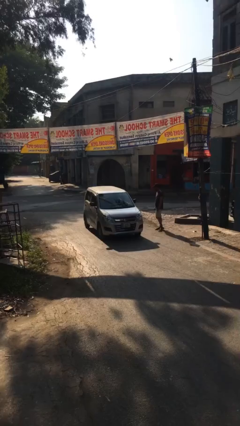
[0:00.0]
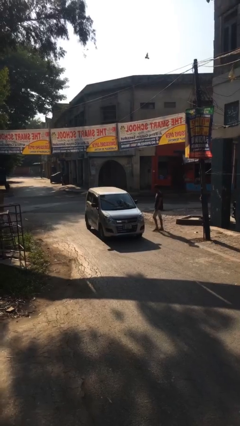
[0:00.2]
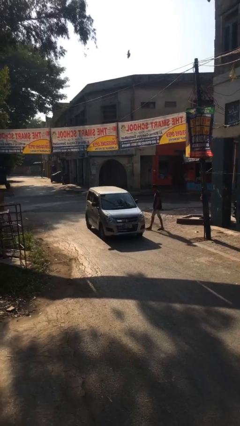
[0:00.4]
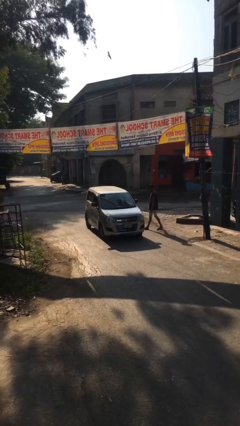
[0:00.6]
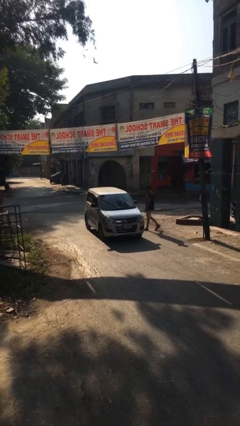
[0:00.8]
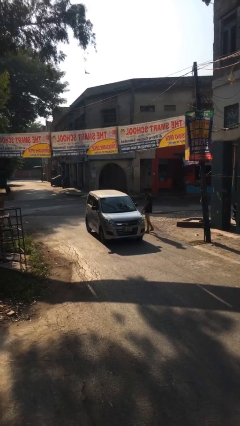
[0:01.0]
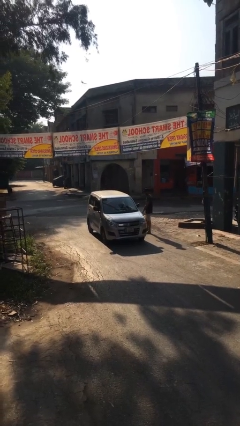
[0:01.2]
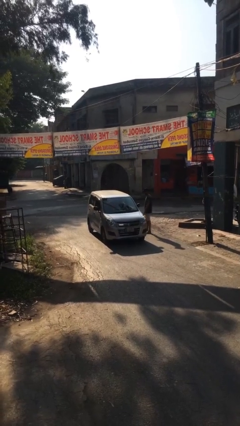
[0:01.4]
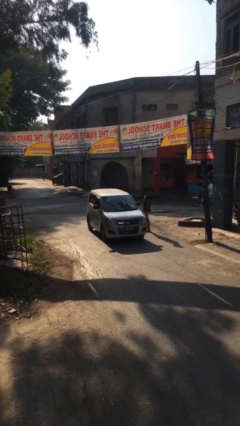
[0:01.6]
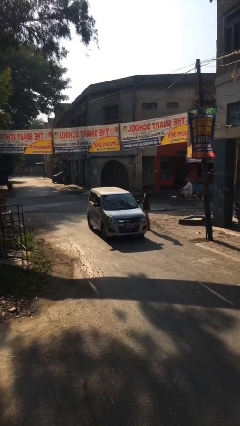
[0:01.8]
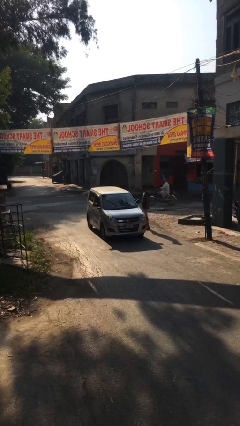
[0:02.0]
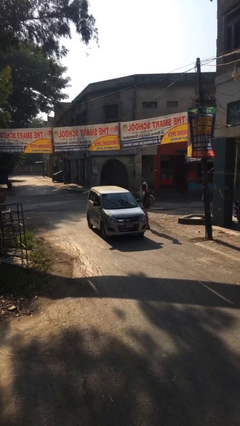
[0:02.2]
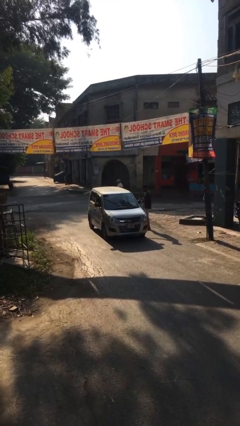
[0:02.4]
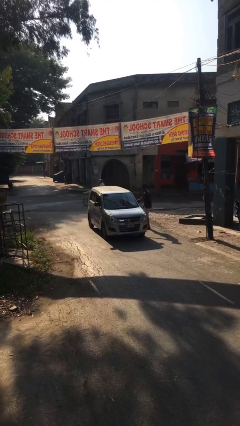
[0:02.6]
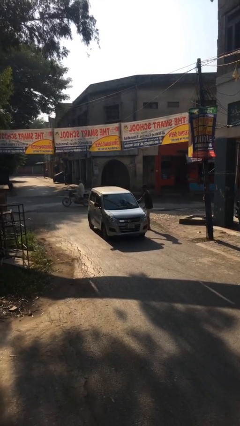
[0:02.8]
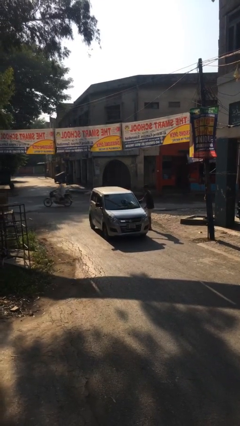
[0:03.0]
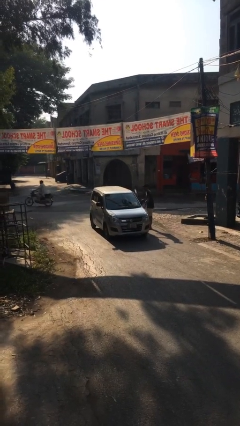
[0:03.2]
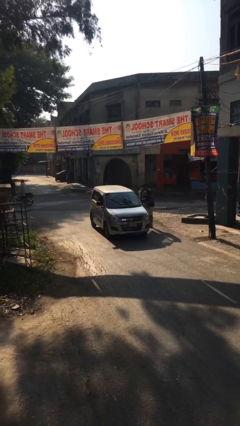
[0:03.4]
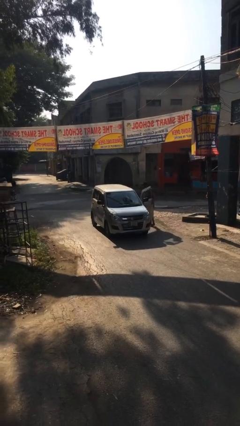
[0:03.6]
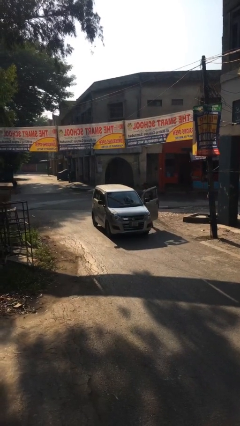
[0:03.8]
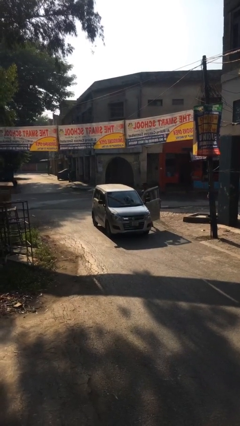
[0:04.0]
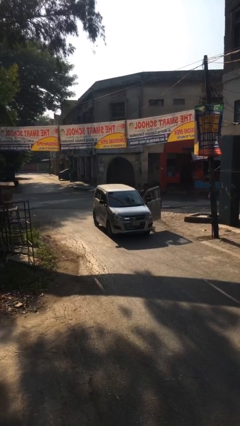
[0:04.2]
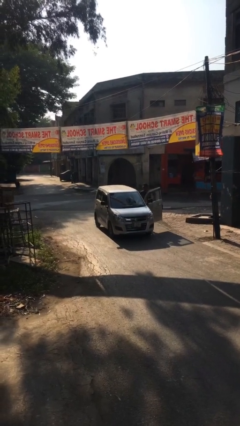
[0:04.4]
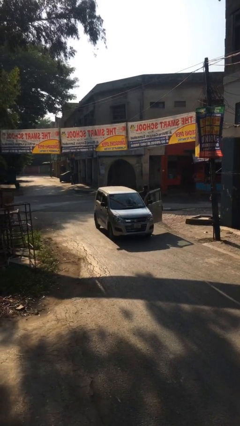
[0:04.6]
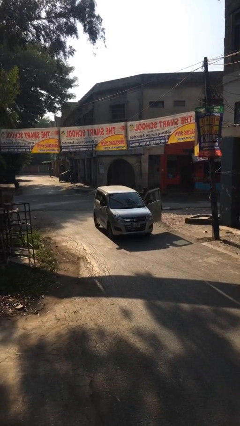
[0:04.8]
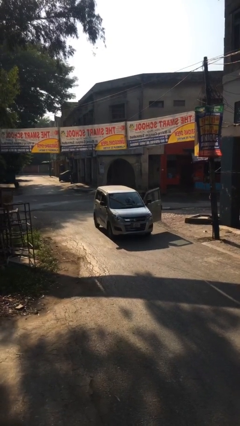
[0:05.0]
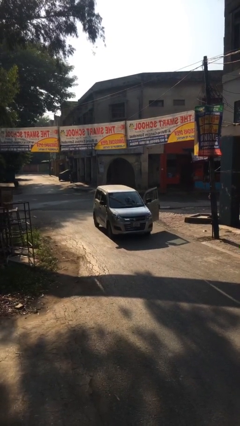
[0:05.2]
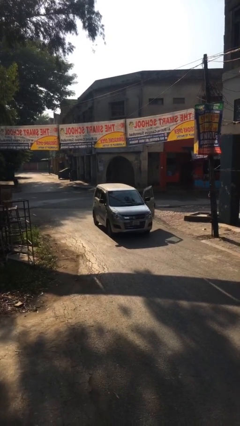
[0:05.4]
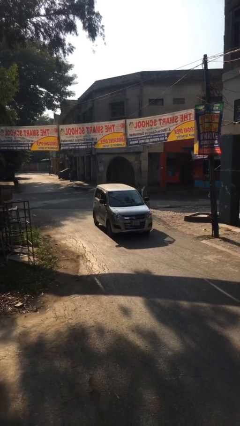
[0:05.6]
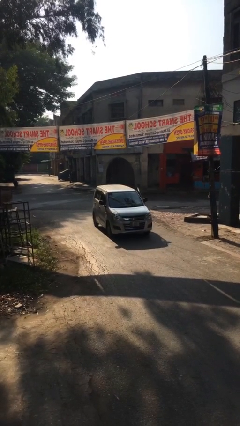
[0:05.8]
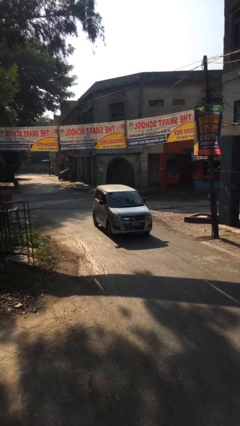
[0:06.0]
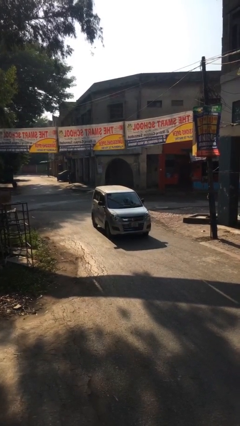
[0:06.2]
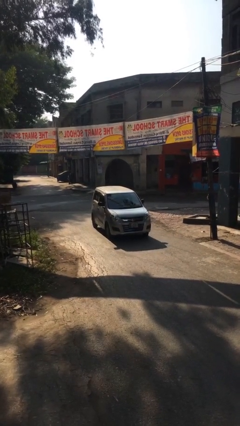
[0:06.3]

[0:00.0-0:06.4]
car picks up person

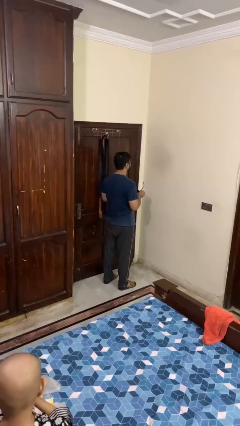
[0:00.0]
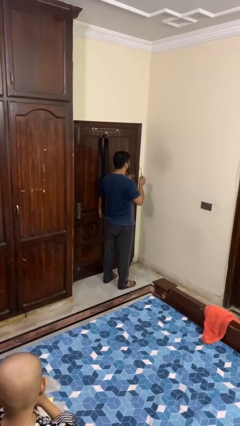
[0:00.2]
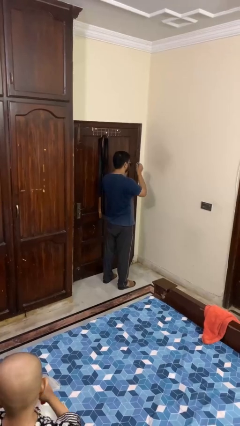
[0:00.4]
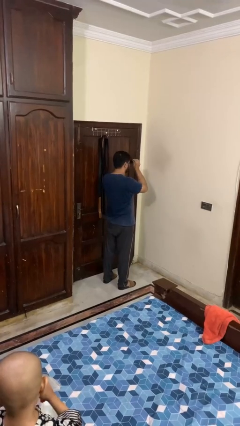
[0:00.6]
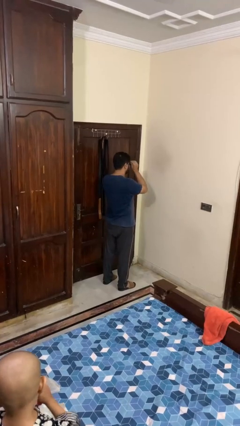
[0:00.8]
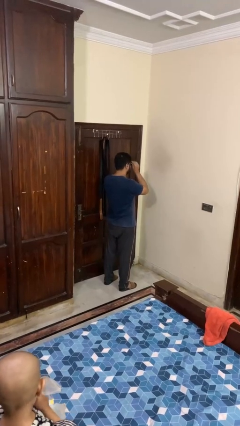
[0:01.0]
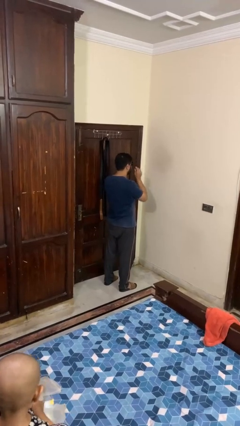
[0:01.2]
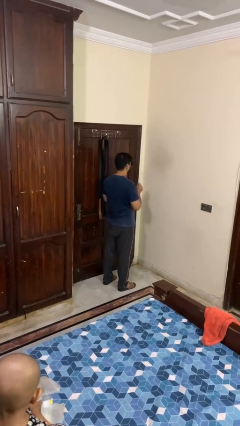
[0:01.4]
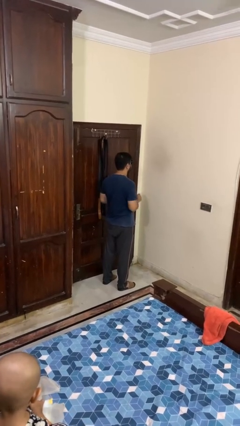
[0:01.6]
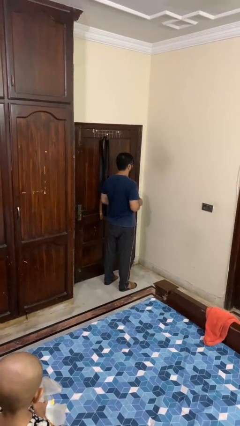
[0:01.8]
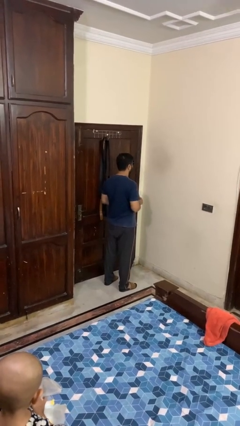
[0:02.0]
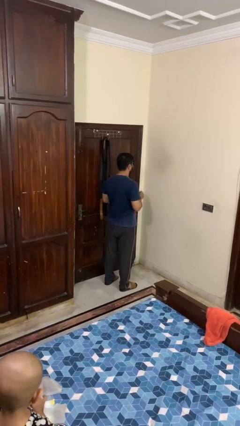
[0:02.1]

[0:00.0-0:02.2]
person puts on sunglasses

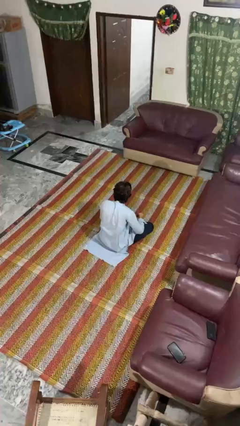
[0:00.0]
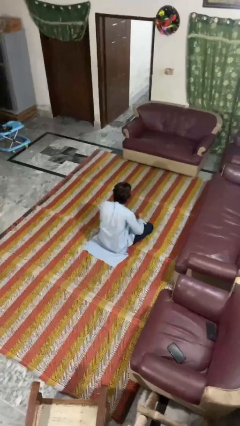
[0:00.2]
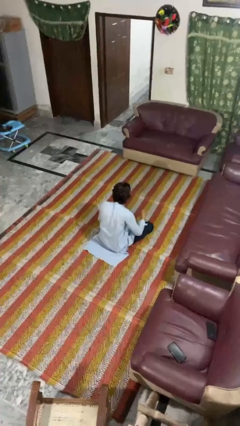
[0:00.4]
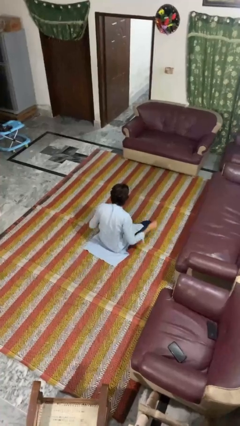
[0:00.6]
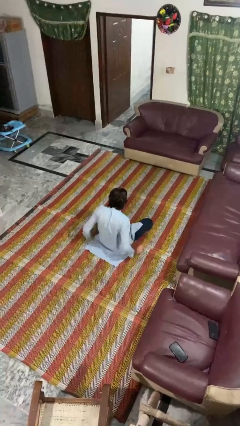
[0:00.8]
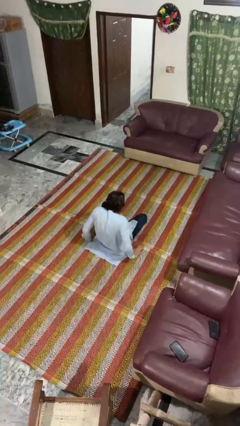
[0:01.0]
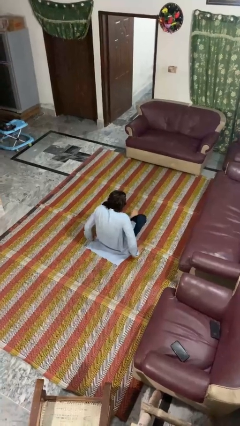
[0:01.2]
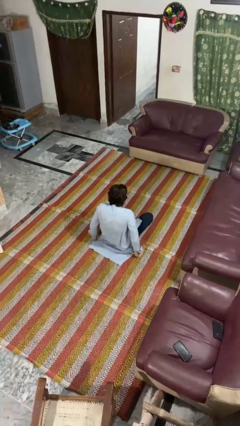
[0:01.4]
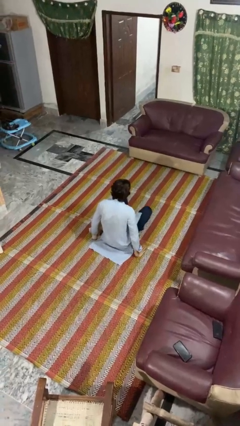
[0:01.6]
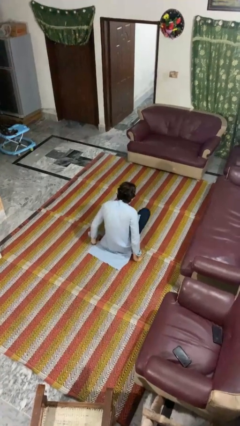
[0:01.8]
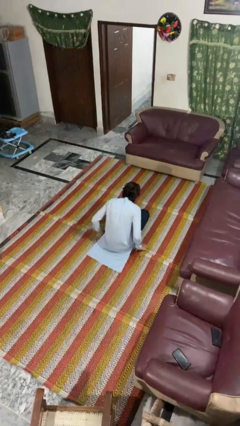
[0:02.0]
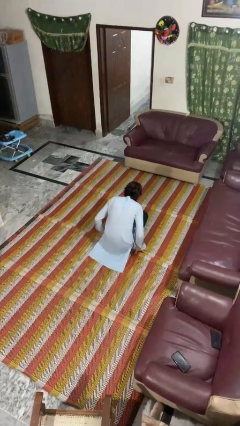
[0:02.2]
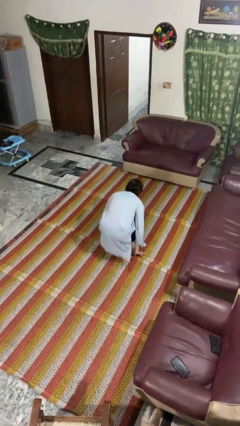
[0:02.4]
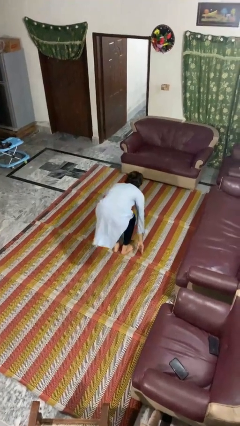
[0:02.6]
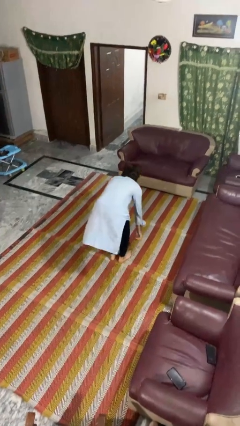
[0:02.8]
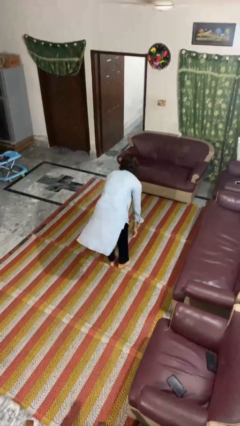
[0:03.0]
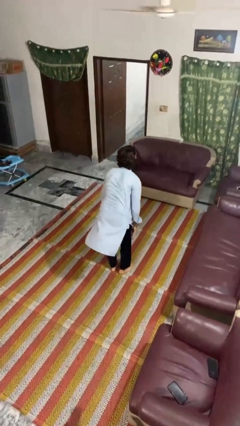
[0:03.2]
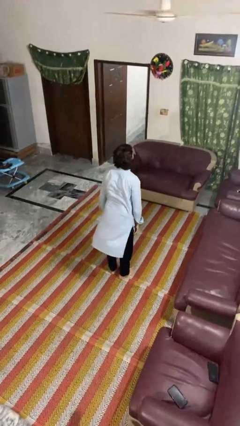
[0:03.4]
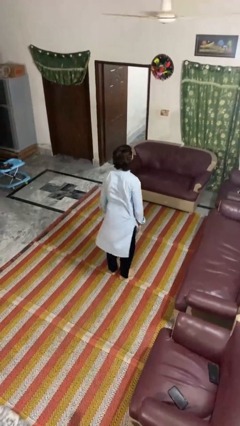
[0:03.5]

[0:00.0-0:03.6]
person stands up from floor

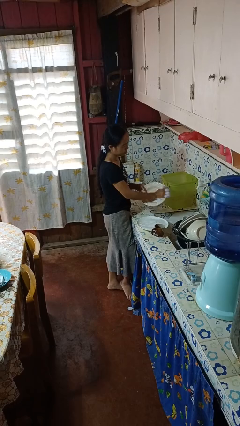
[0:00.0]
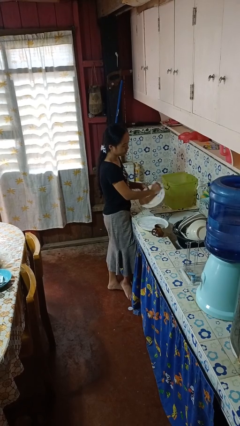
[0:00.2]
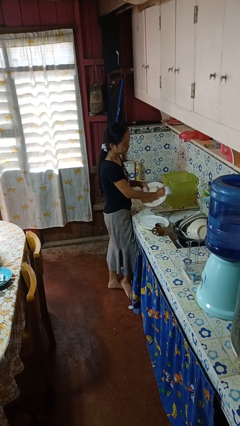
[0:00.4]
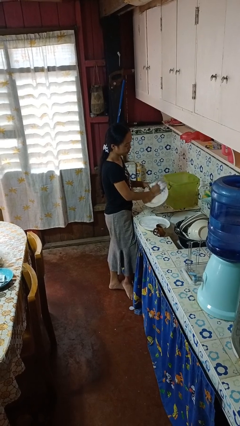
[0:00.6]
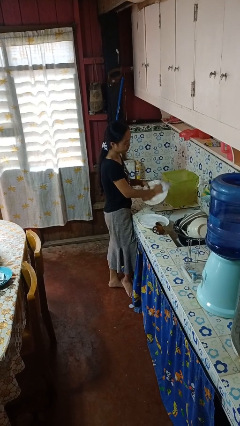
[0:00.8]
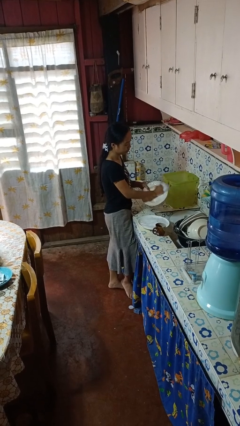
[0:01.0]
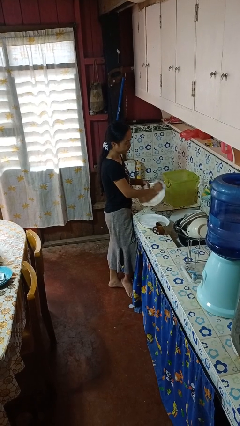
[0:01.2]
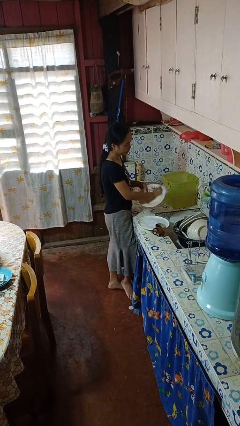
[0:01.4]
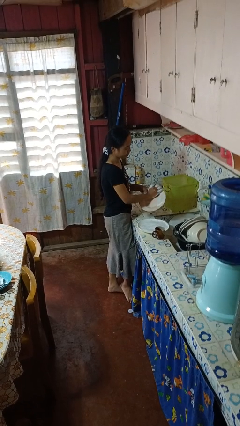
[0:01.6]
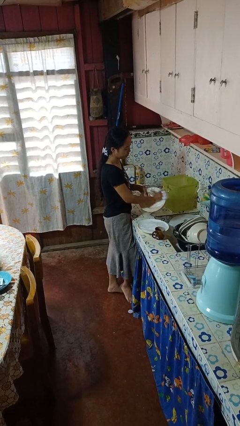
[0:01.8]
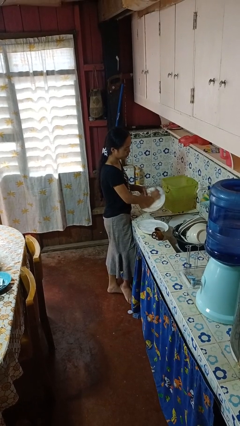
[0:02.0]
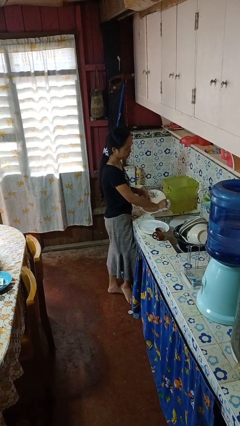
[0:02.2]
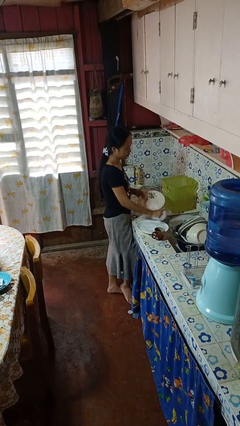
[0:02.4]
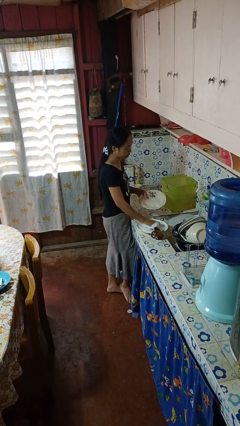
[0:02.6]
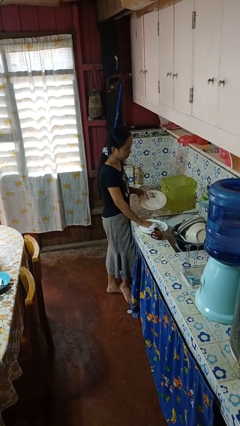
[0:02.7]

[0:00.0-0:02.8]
person washes dish

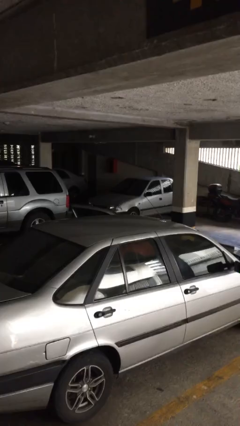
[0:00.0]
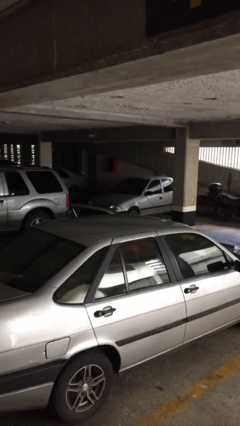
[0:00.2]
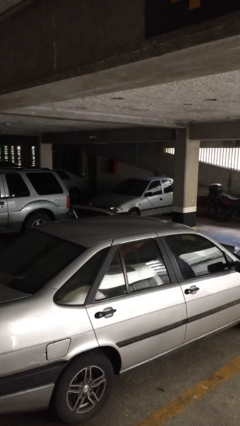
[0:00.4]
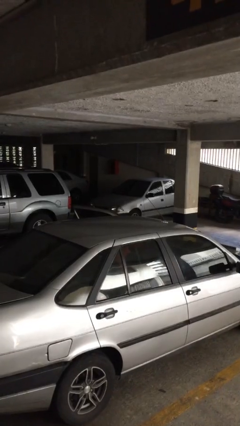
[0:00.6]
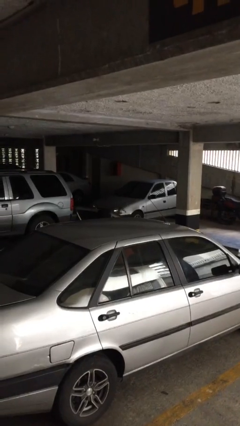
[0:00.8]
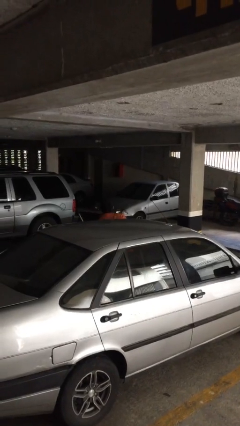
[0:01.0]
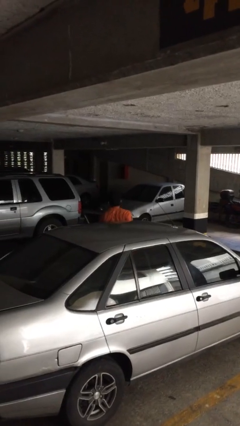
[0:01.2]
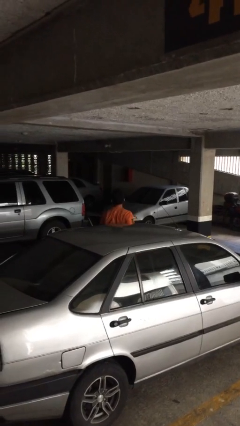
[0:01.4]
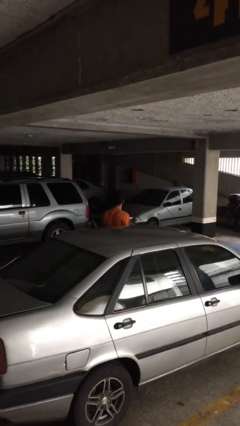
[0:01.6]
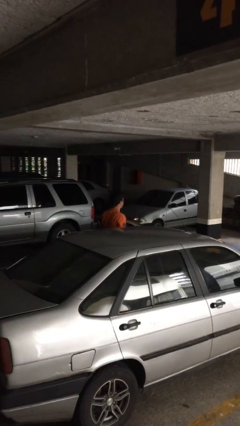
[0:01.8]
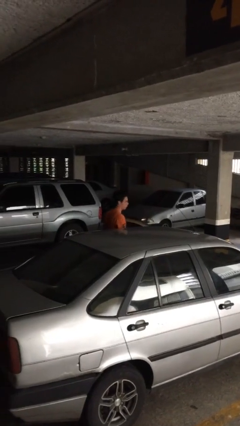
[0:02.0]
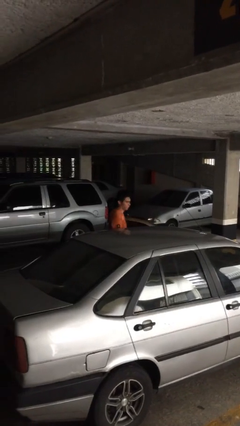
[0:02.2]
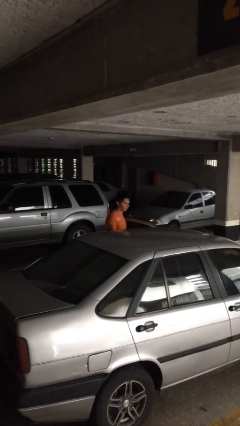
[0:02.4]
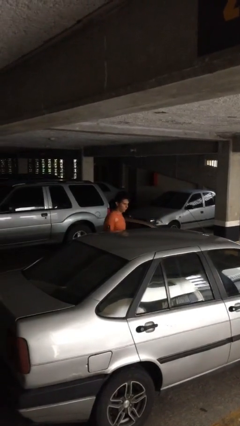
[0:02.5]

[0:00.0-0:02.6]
person exits car

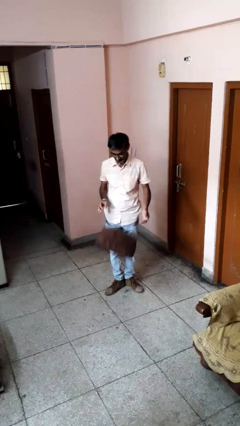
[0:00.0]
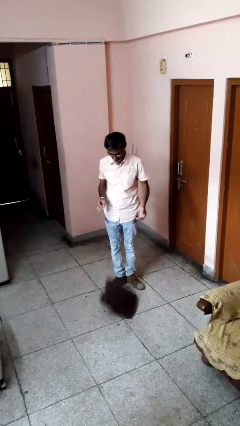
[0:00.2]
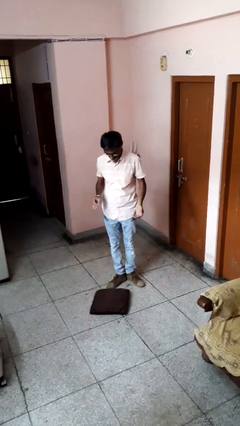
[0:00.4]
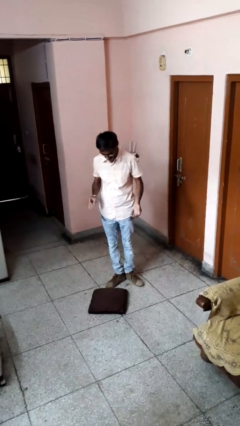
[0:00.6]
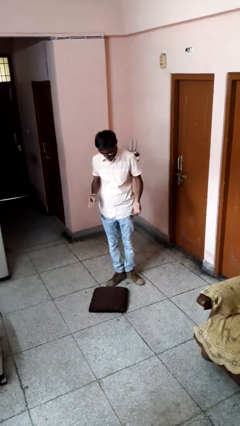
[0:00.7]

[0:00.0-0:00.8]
person drops object
